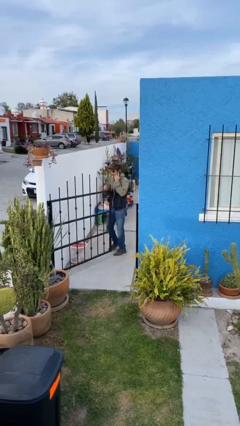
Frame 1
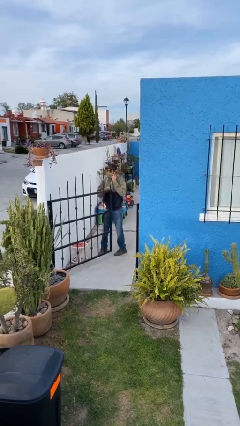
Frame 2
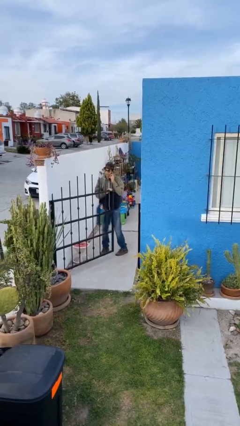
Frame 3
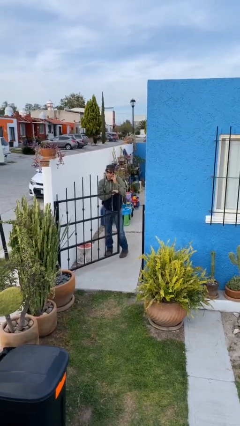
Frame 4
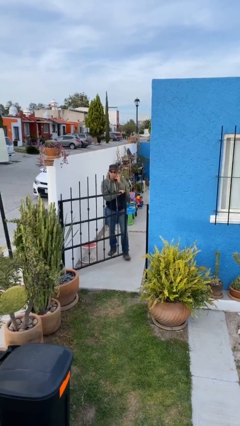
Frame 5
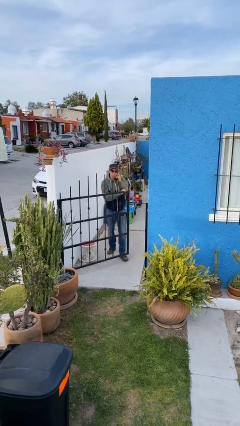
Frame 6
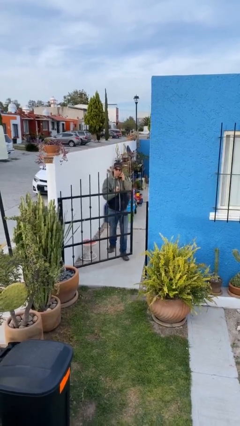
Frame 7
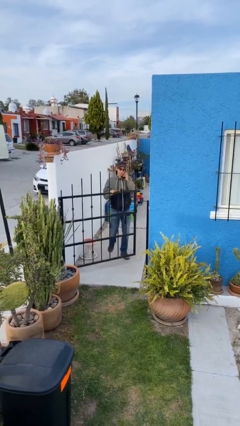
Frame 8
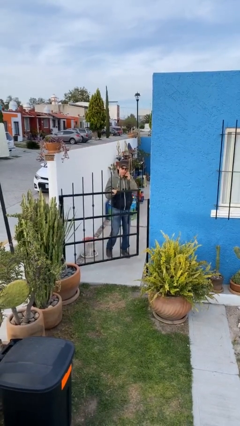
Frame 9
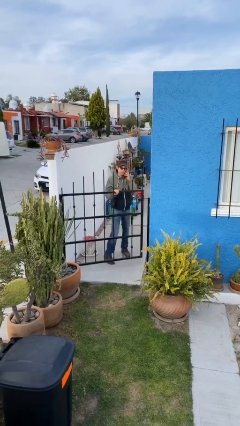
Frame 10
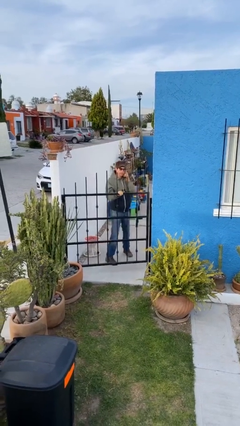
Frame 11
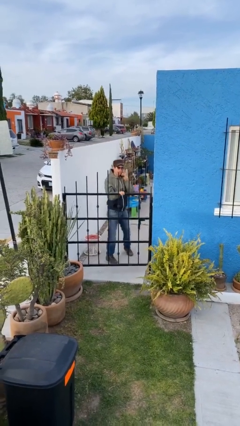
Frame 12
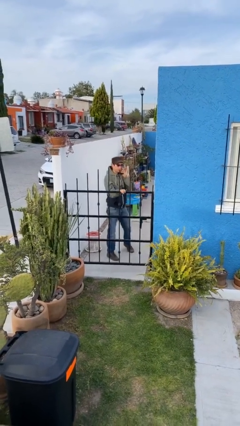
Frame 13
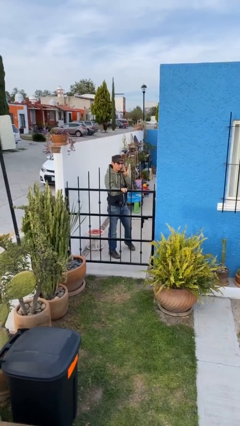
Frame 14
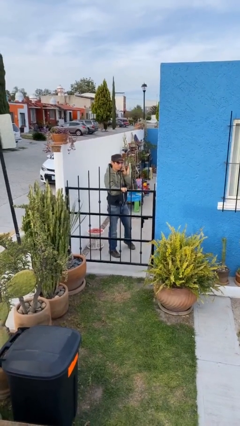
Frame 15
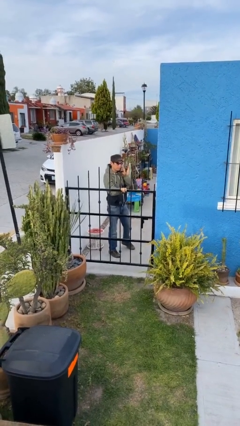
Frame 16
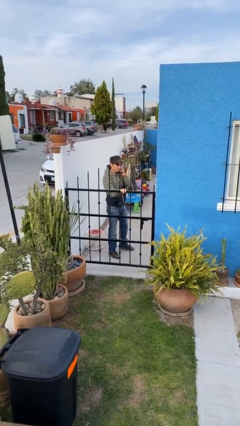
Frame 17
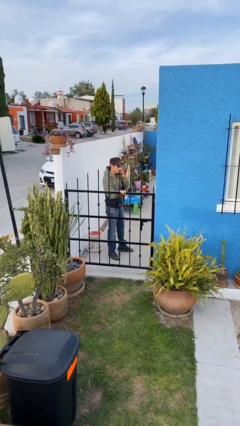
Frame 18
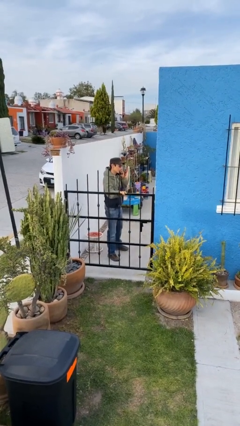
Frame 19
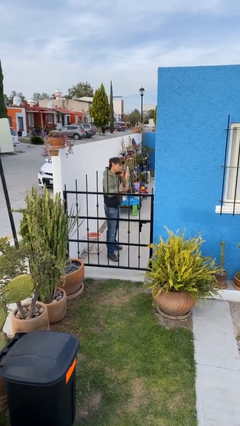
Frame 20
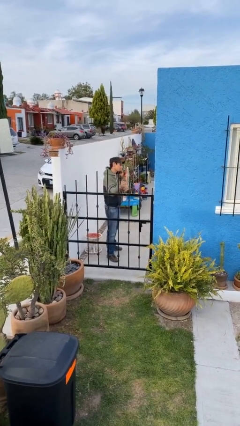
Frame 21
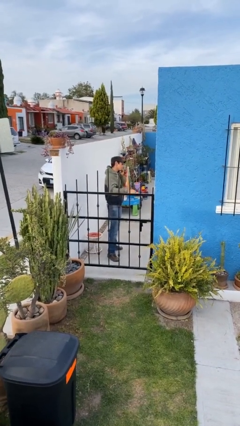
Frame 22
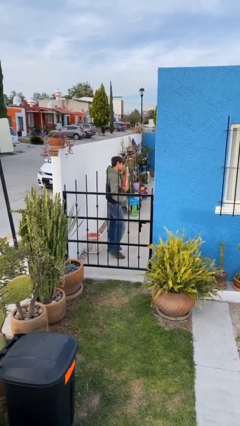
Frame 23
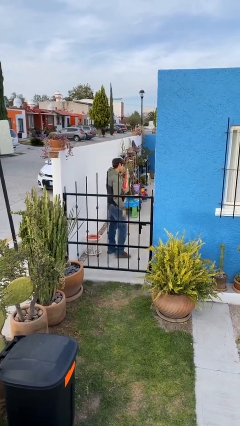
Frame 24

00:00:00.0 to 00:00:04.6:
person closes facility door

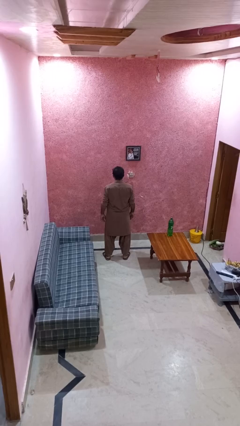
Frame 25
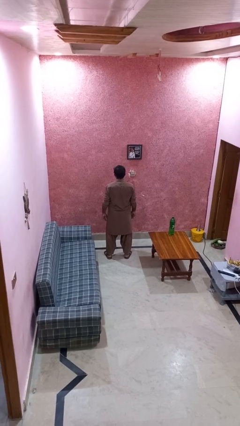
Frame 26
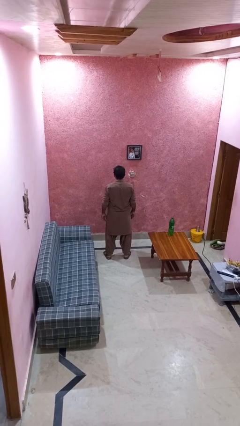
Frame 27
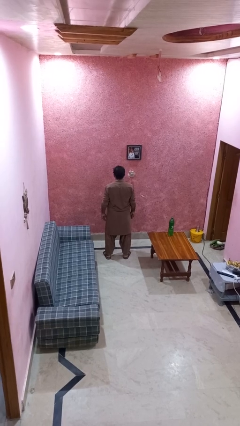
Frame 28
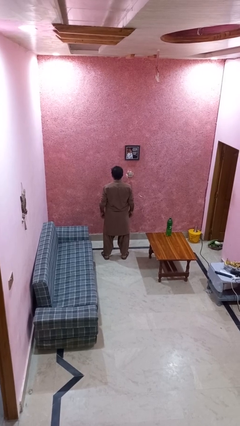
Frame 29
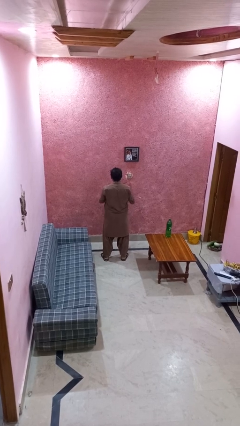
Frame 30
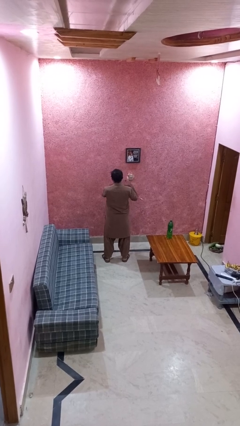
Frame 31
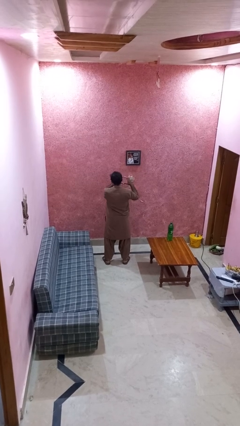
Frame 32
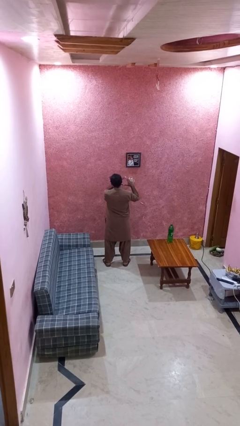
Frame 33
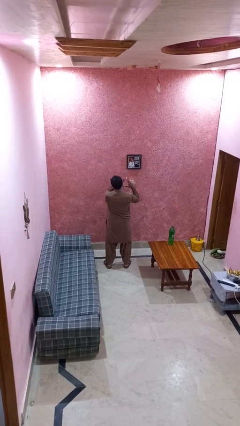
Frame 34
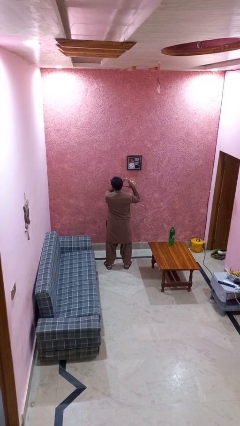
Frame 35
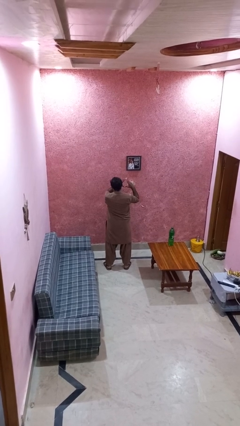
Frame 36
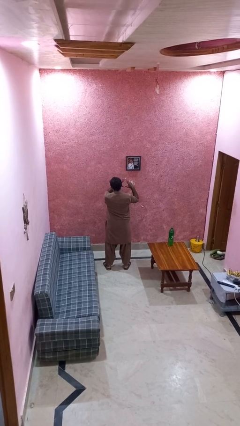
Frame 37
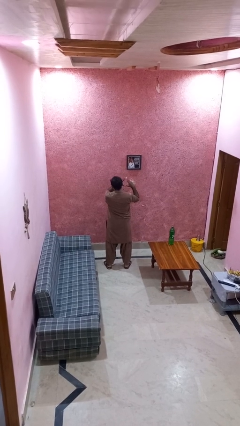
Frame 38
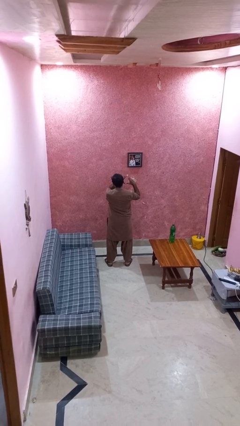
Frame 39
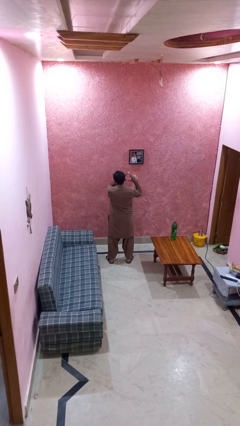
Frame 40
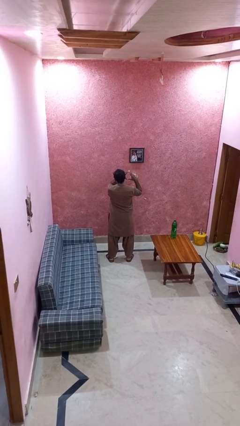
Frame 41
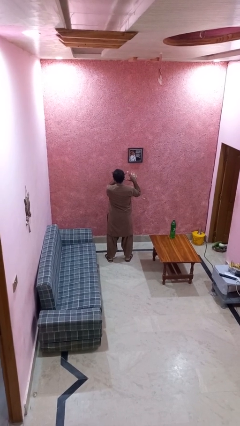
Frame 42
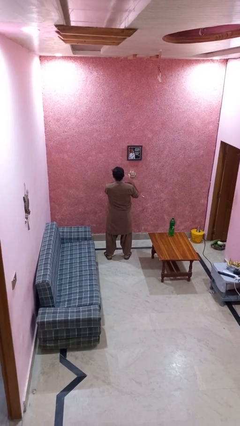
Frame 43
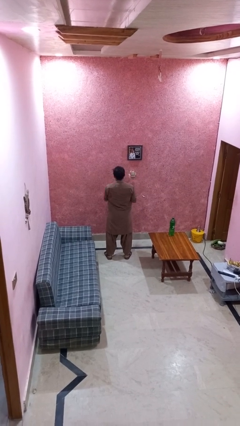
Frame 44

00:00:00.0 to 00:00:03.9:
person gestures heart

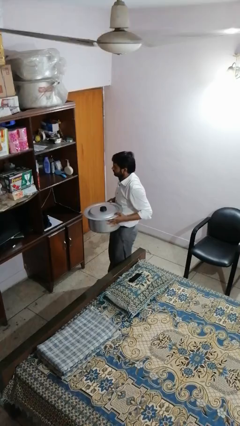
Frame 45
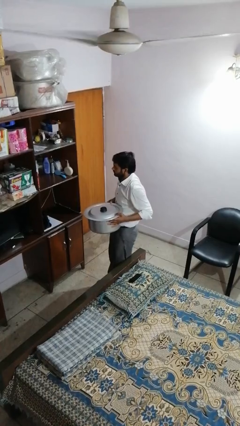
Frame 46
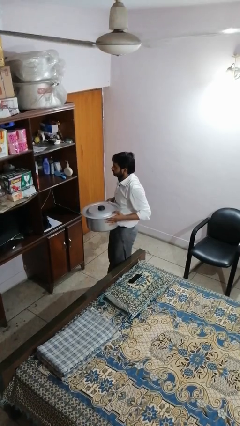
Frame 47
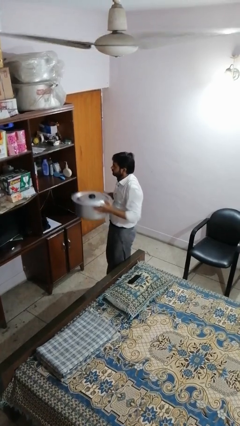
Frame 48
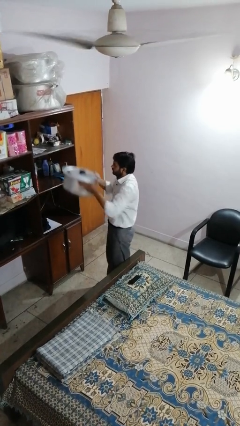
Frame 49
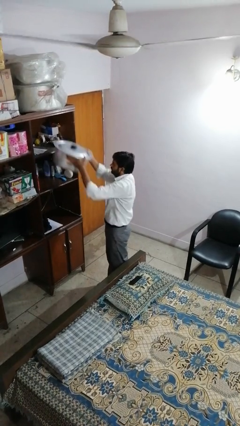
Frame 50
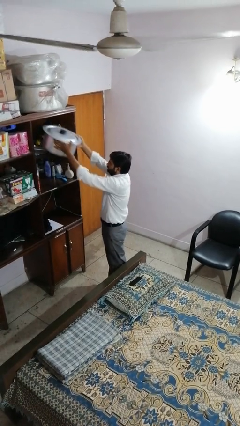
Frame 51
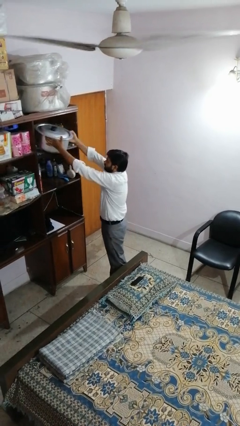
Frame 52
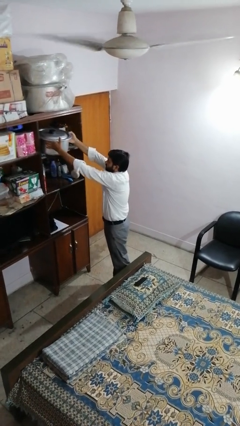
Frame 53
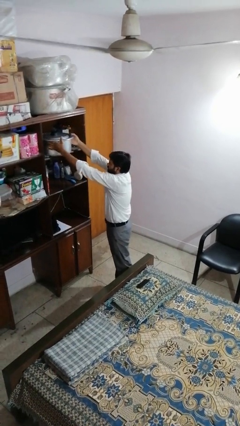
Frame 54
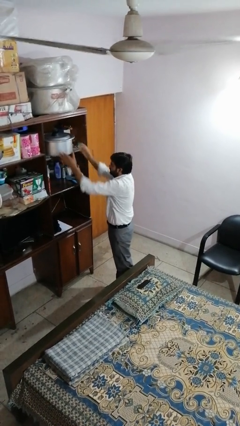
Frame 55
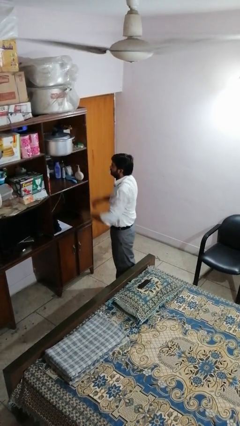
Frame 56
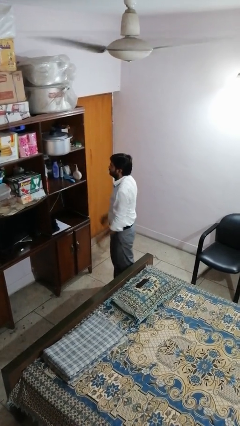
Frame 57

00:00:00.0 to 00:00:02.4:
person puts down object on shelf

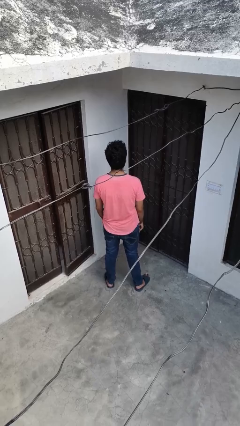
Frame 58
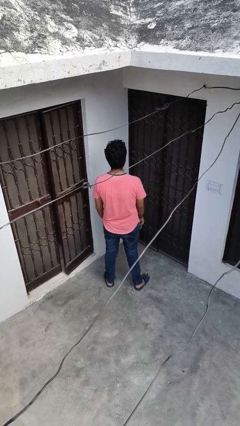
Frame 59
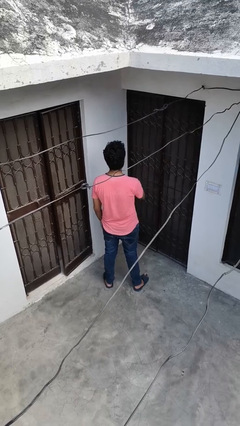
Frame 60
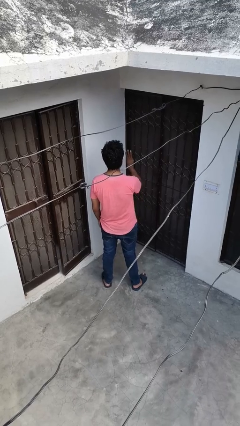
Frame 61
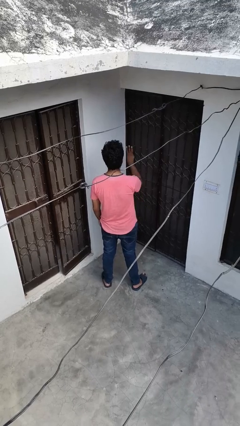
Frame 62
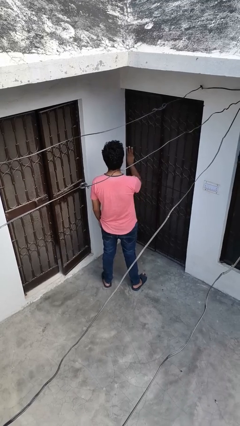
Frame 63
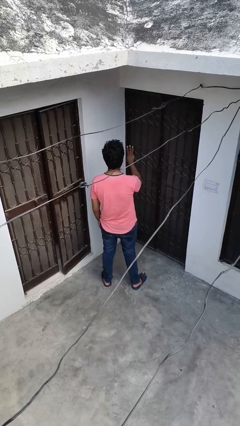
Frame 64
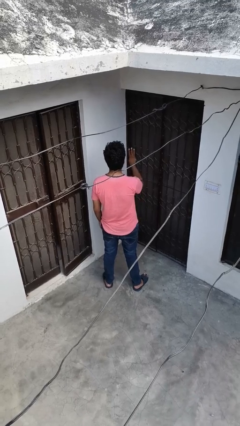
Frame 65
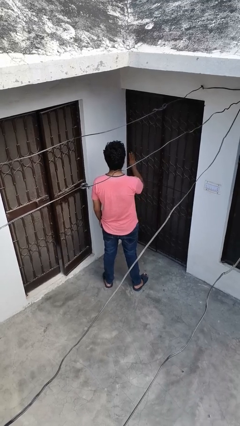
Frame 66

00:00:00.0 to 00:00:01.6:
person gestures number three

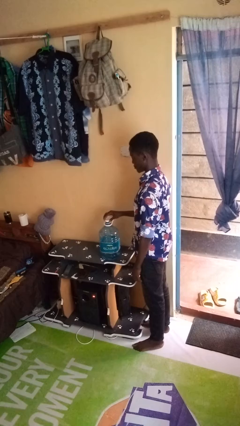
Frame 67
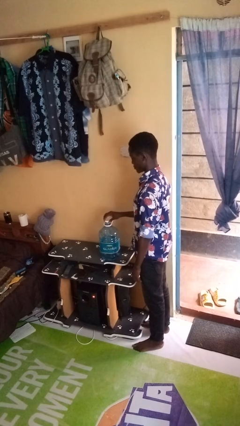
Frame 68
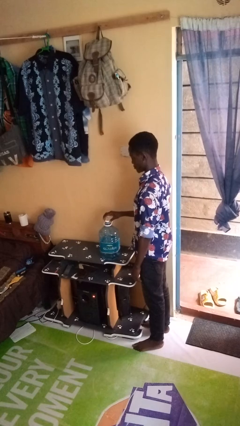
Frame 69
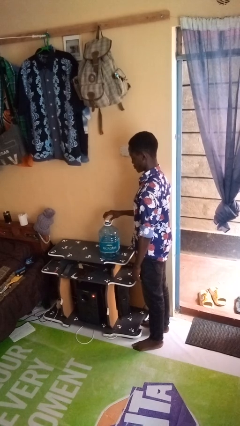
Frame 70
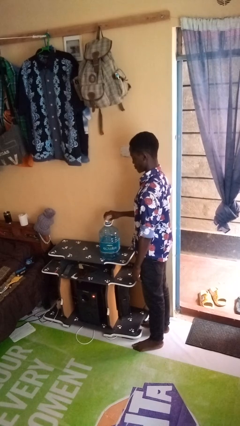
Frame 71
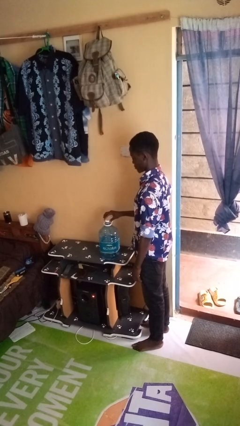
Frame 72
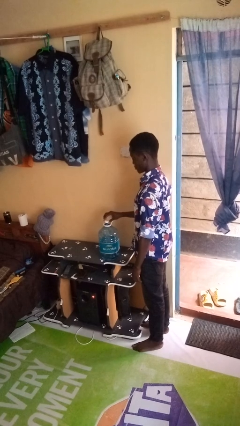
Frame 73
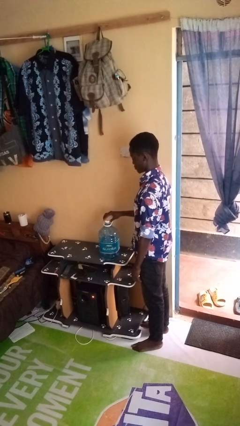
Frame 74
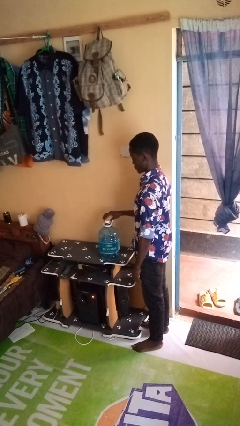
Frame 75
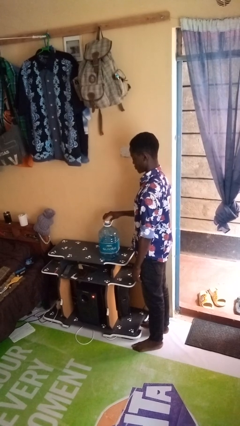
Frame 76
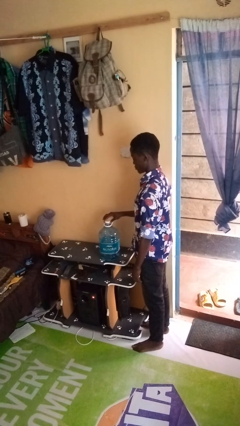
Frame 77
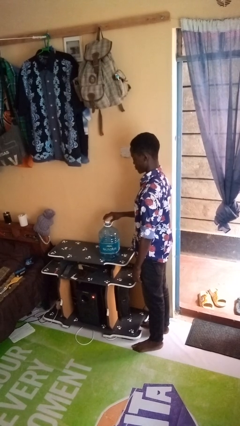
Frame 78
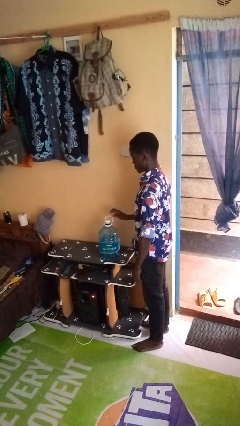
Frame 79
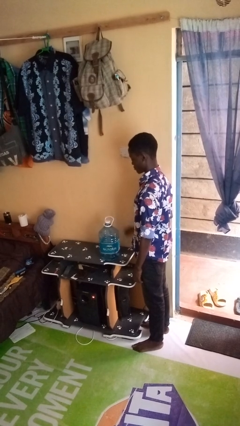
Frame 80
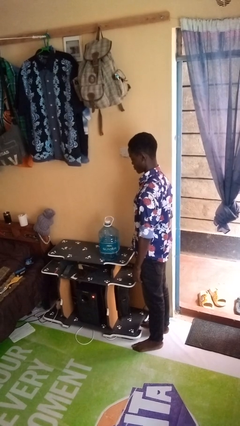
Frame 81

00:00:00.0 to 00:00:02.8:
person screws lid to bottle

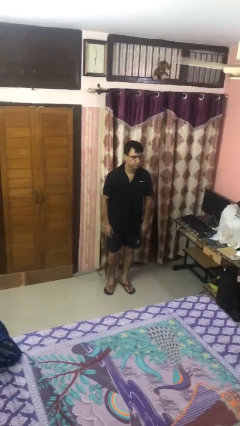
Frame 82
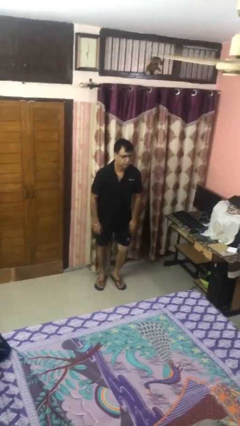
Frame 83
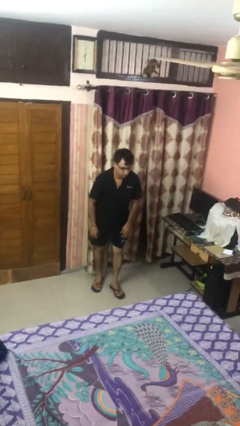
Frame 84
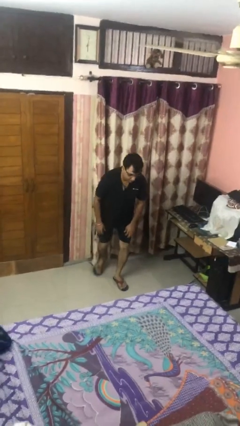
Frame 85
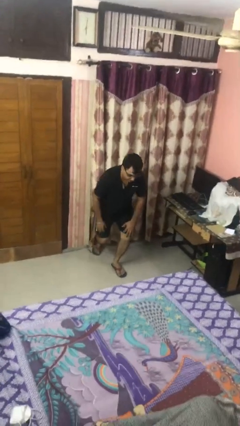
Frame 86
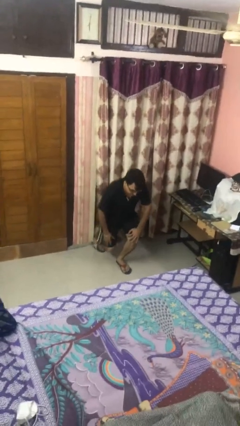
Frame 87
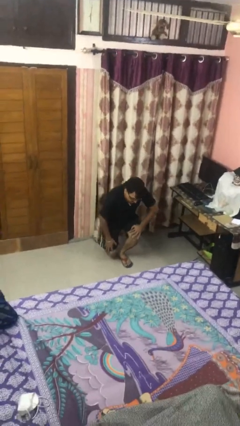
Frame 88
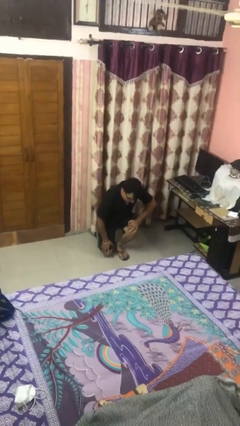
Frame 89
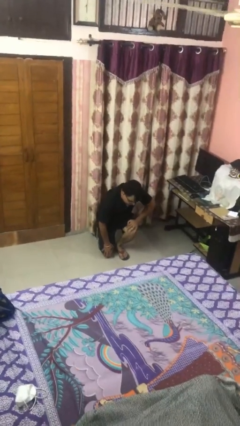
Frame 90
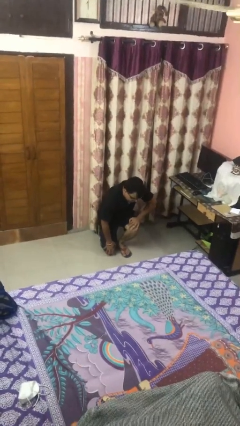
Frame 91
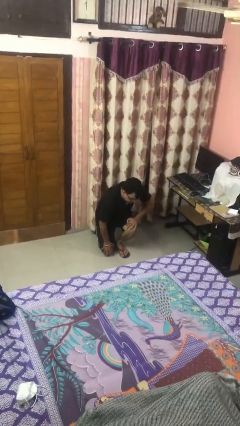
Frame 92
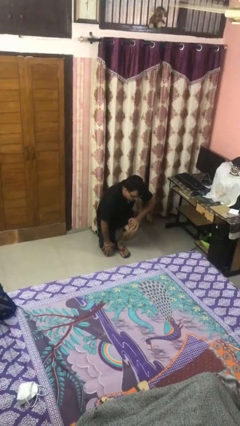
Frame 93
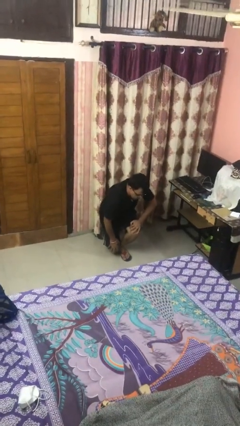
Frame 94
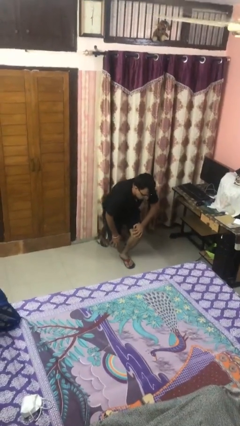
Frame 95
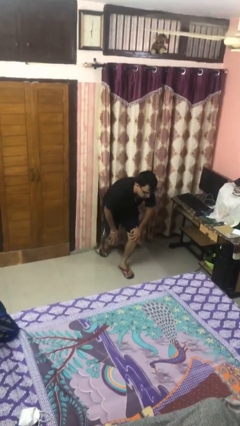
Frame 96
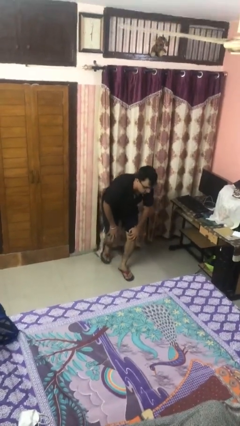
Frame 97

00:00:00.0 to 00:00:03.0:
person kneels
